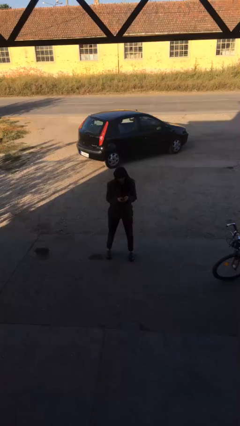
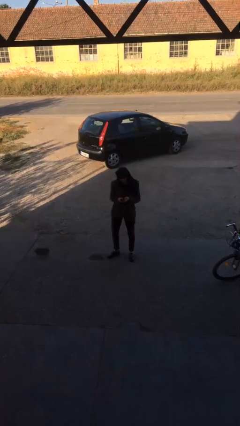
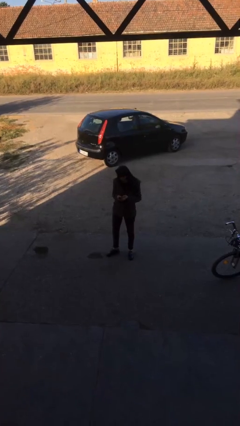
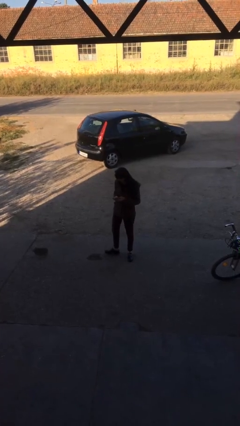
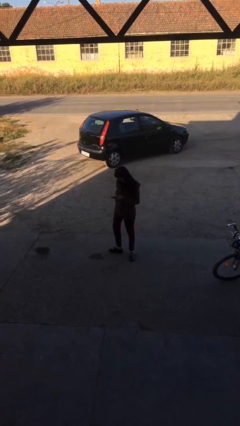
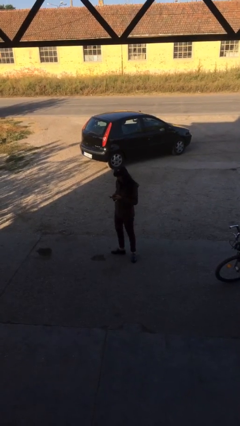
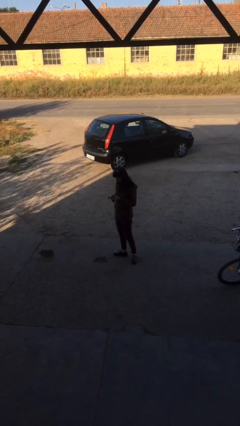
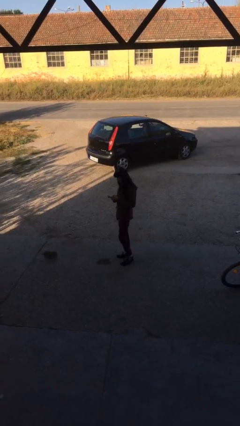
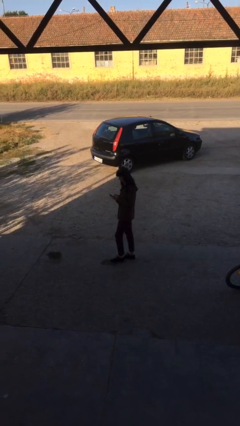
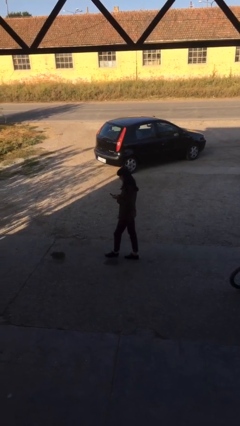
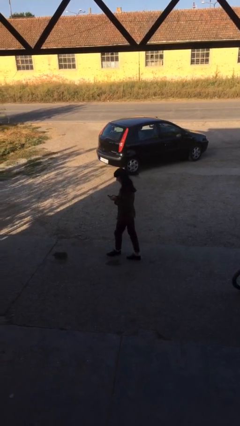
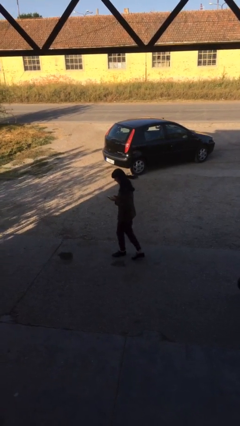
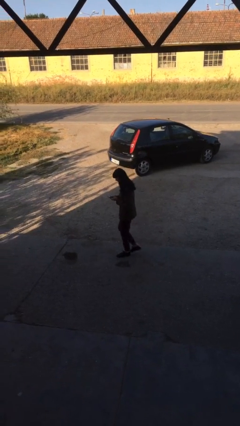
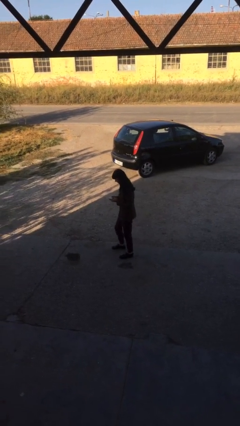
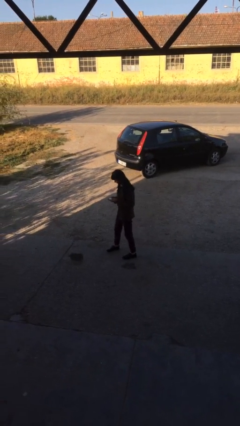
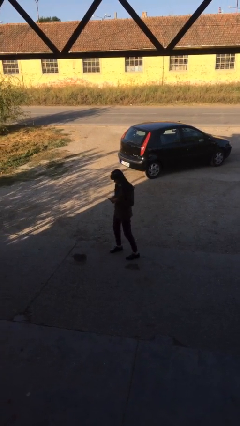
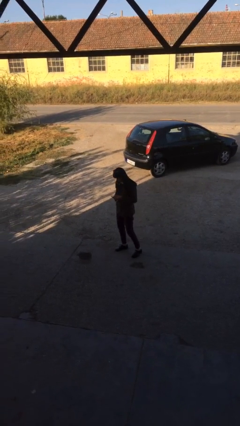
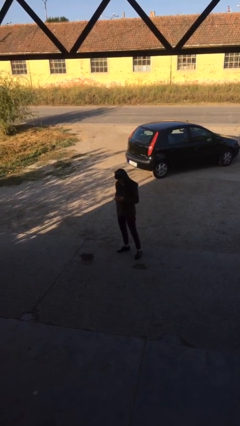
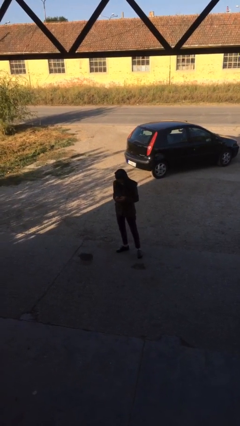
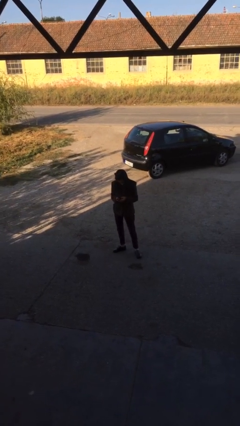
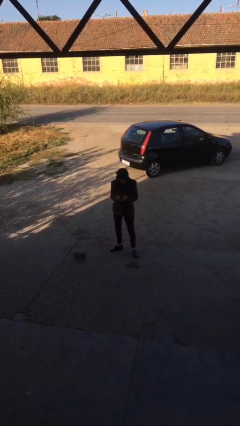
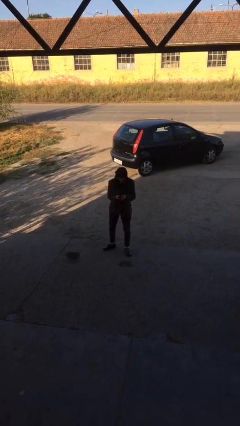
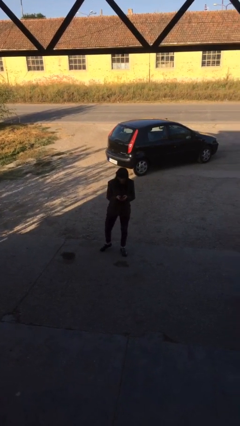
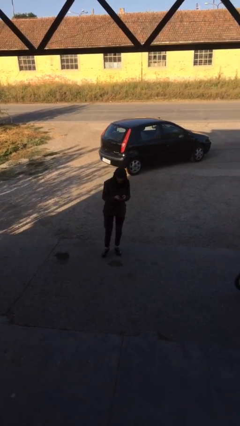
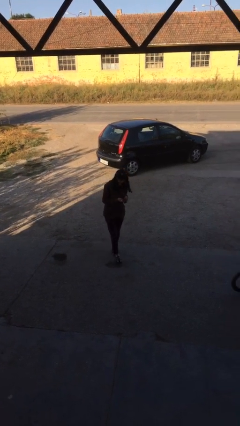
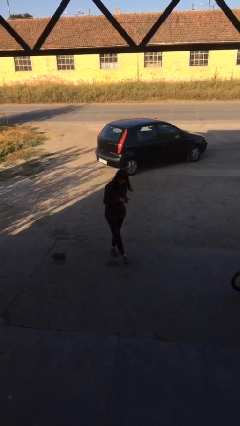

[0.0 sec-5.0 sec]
person texts on phone

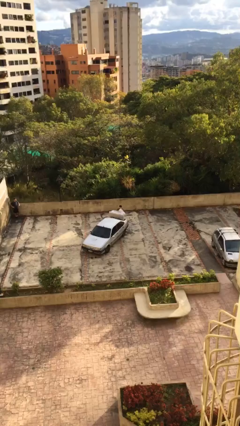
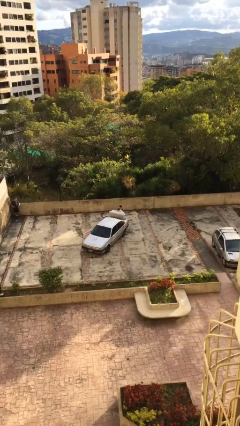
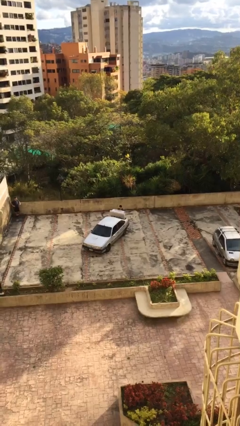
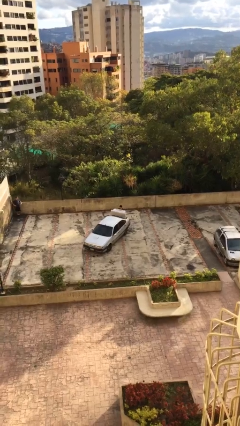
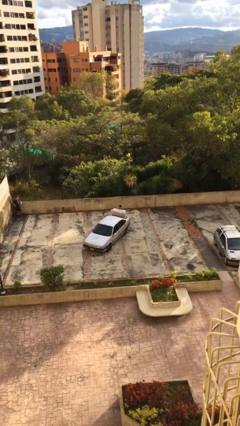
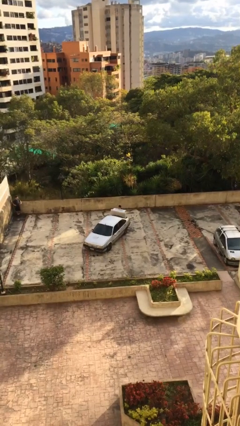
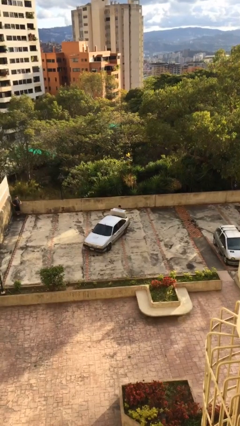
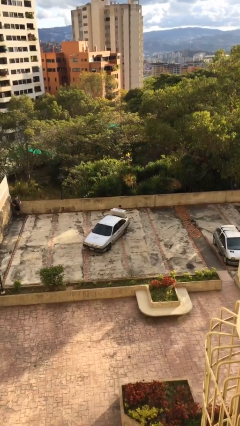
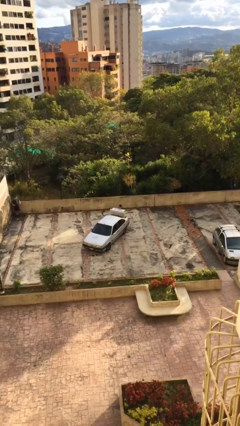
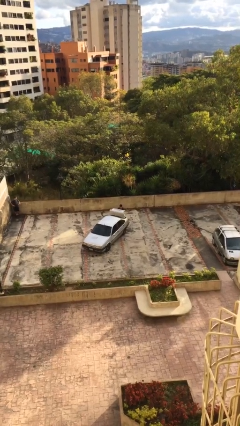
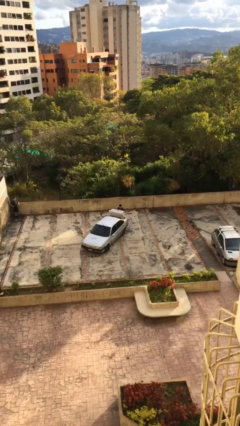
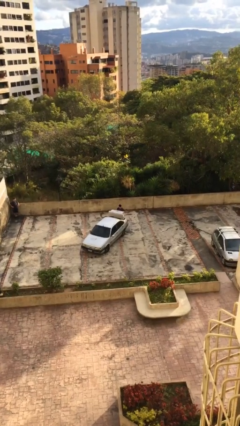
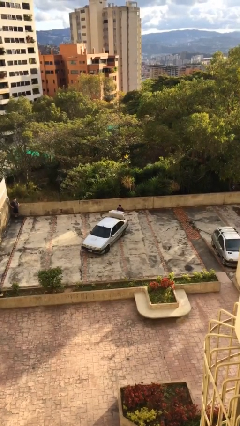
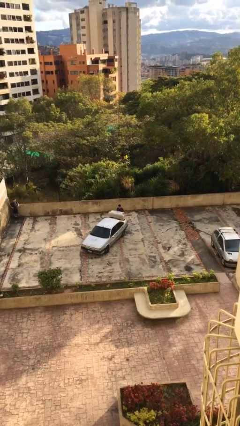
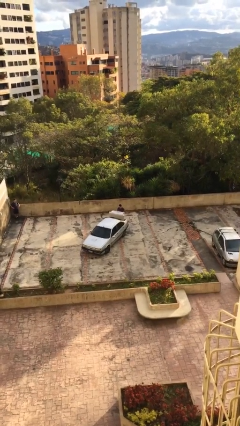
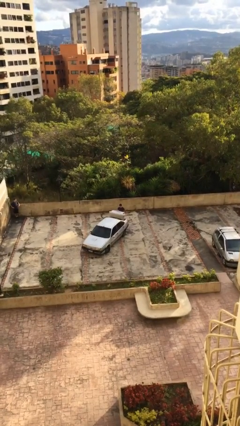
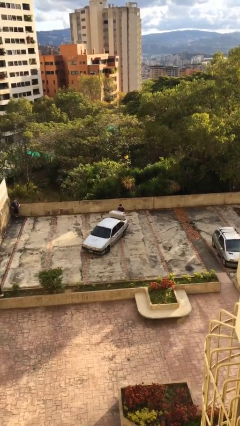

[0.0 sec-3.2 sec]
person loads car

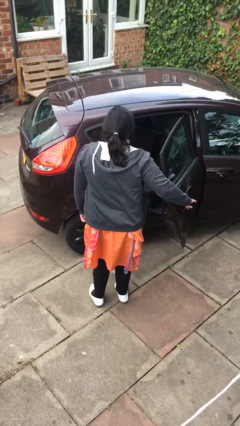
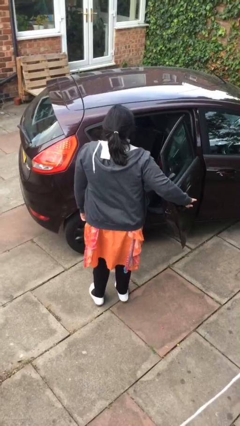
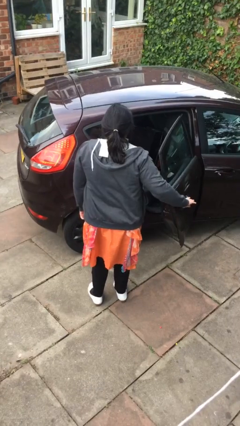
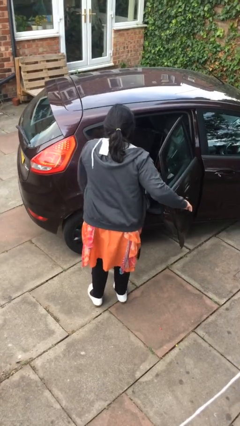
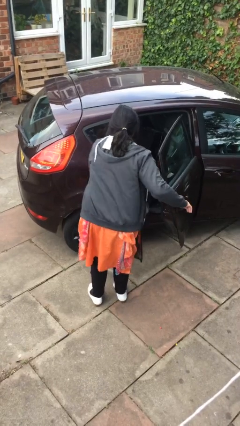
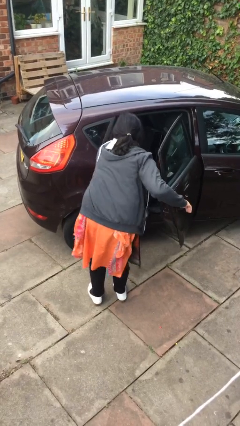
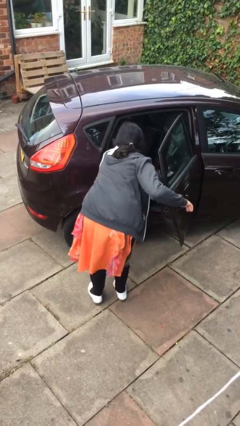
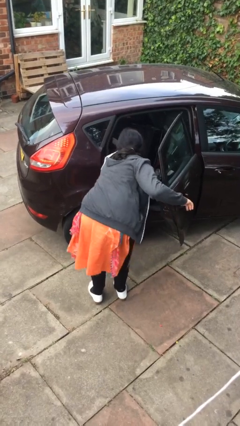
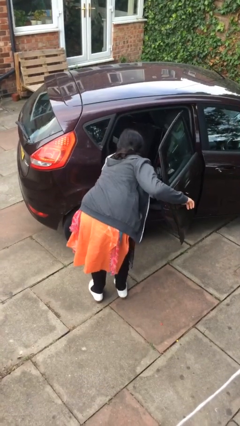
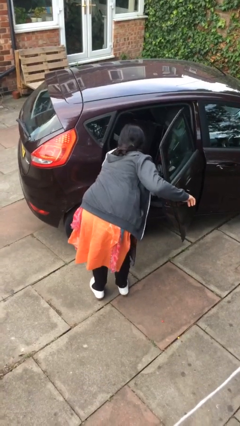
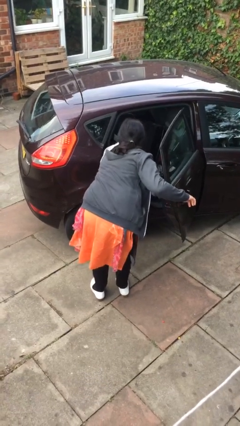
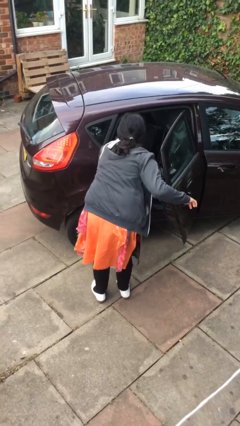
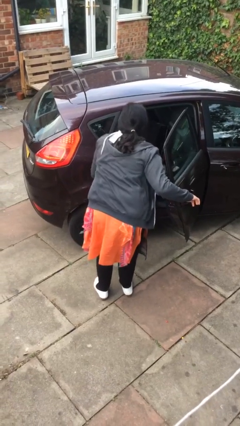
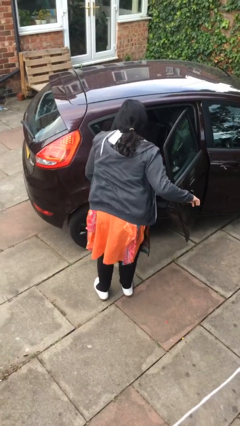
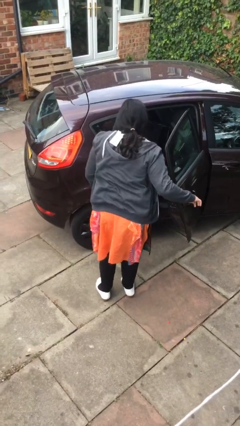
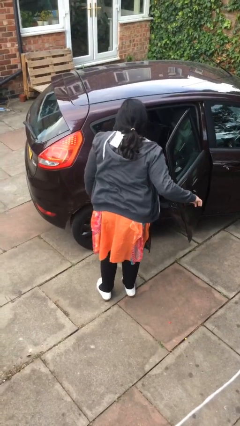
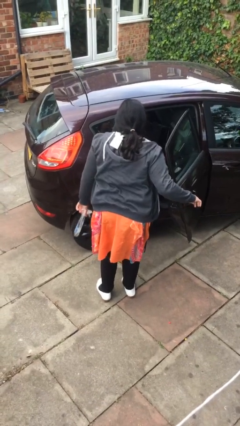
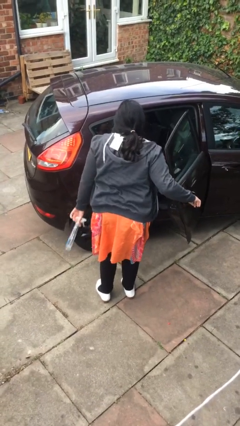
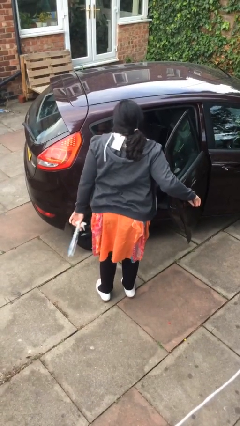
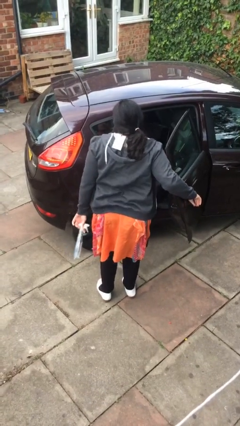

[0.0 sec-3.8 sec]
person unloads car

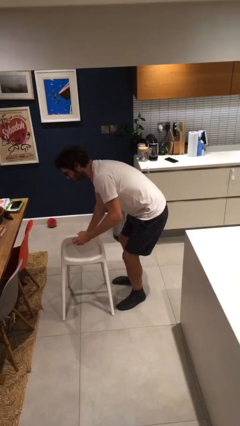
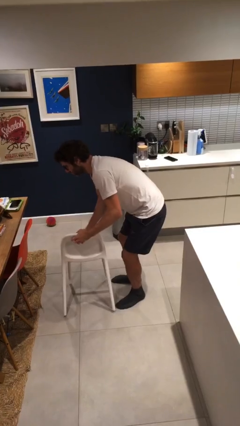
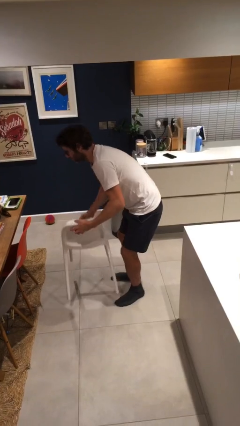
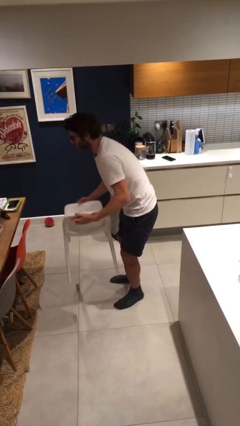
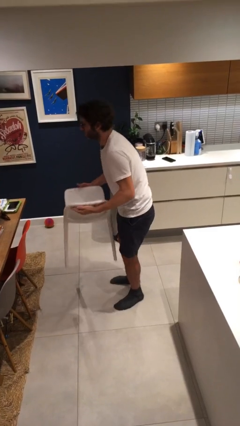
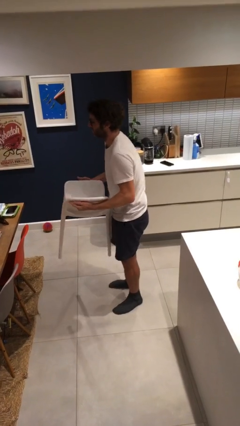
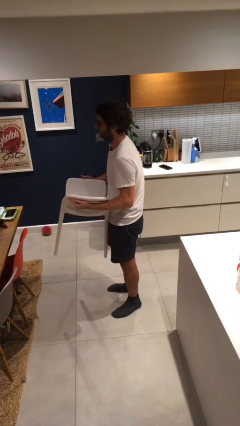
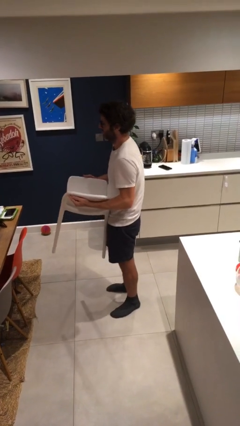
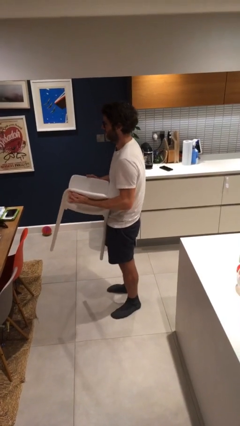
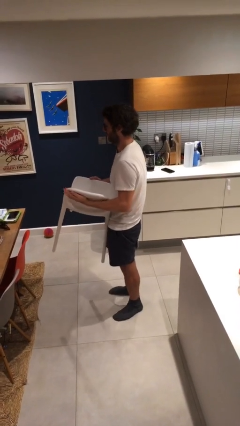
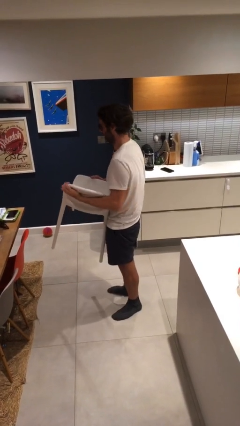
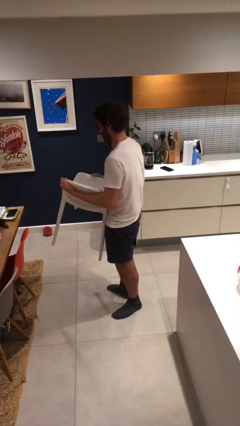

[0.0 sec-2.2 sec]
person picks up object from floor

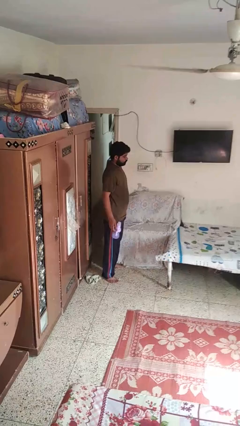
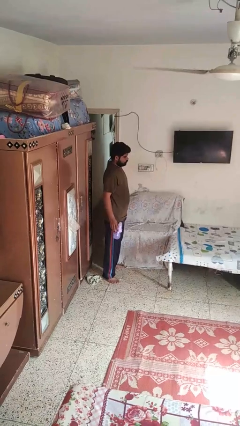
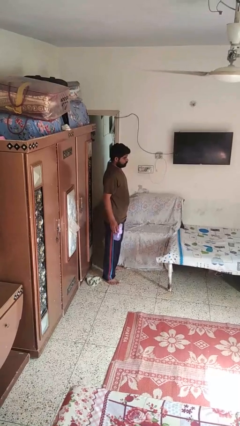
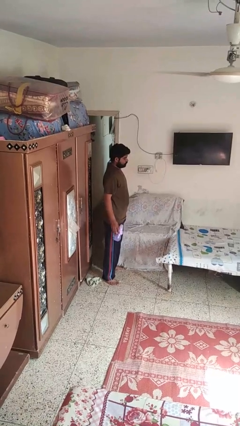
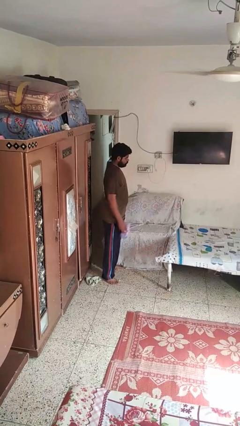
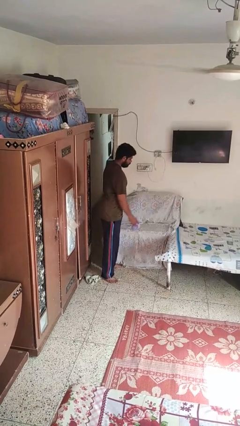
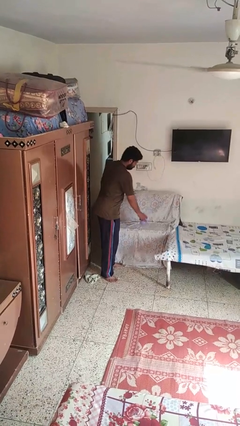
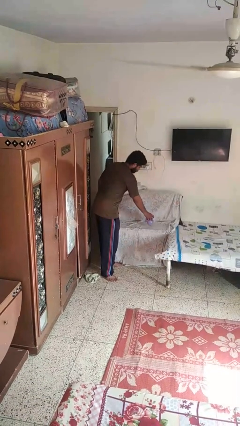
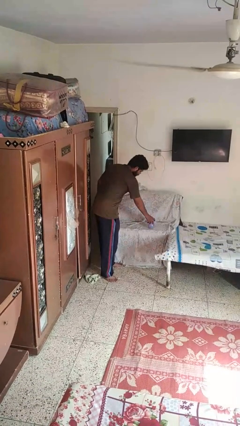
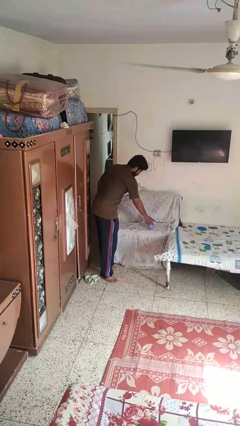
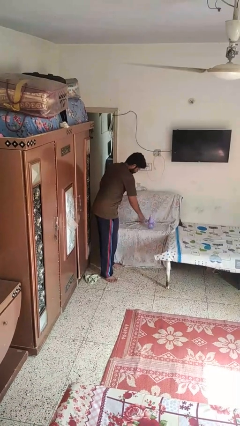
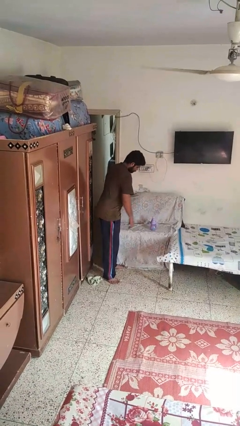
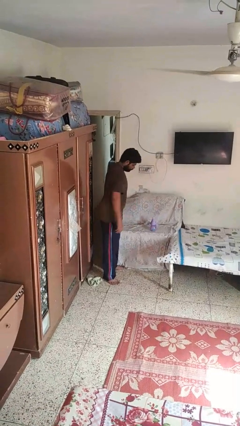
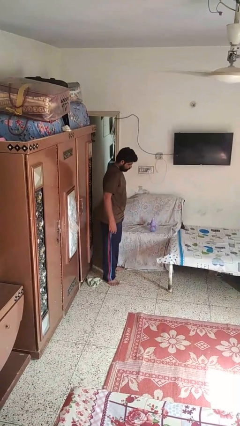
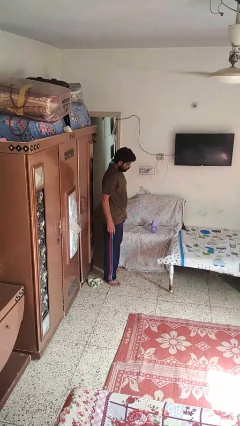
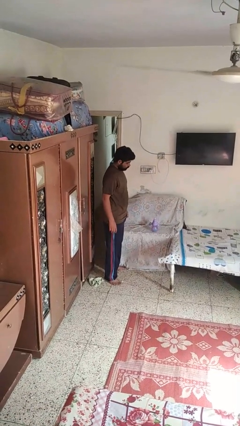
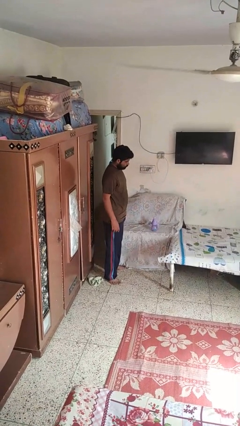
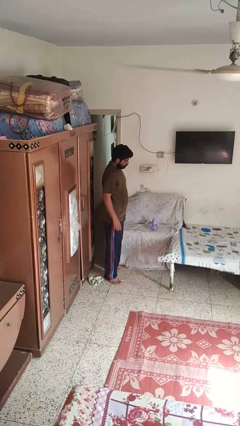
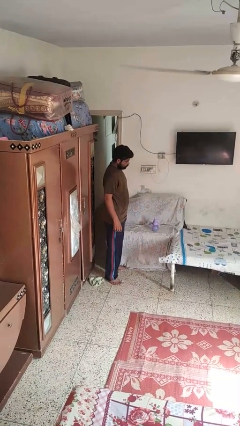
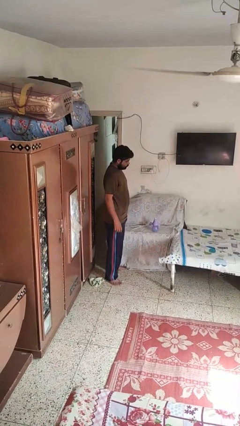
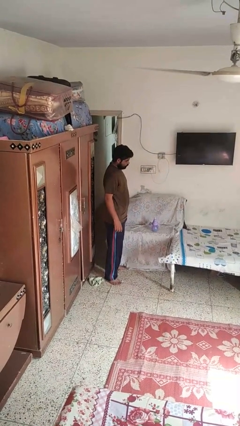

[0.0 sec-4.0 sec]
person puts down object on couch
